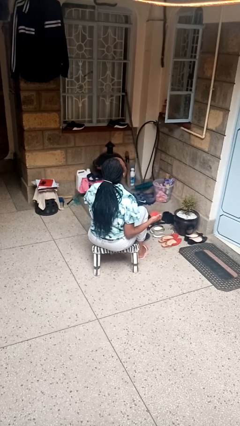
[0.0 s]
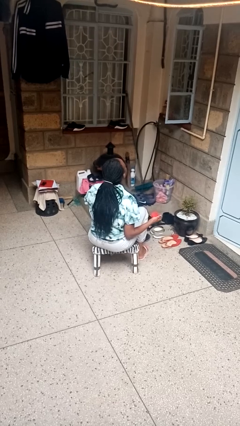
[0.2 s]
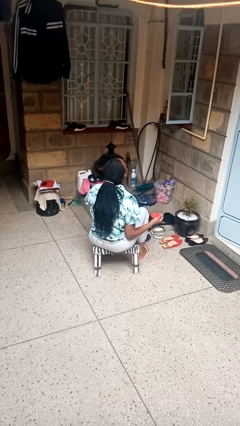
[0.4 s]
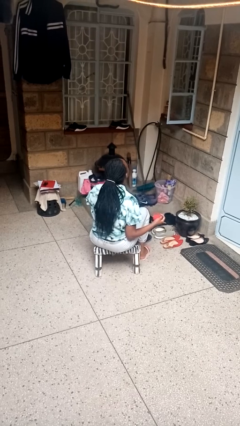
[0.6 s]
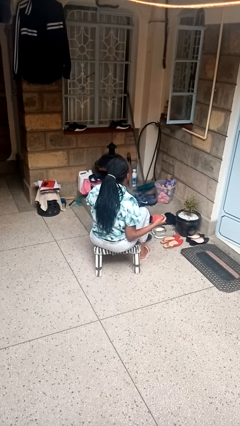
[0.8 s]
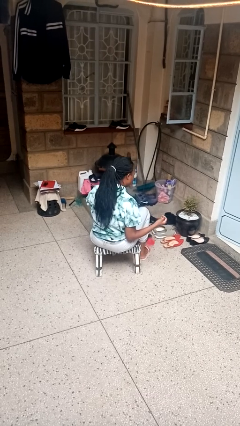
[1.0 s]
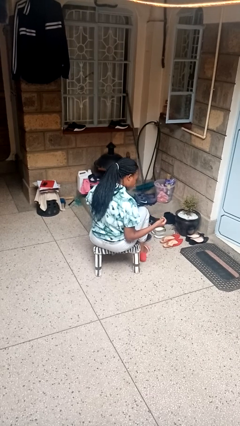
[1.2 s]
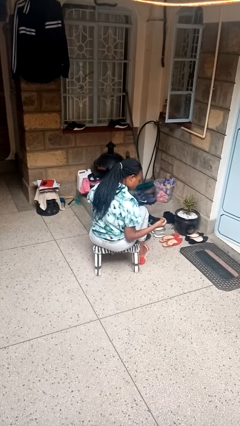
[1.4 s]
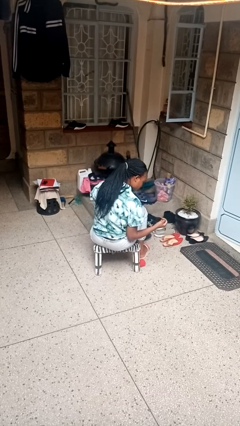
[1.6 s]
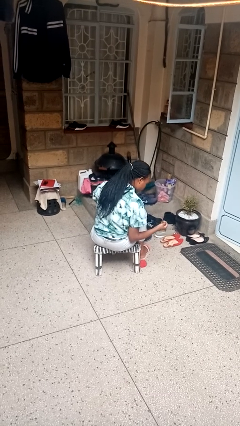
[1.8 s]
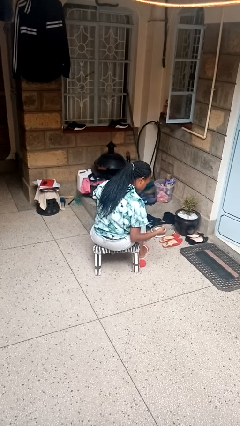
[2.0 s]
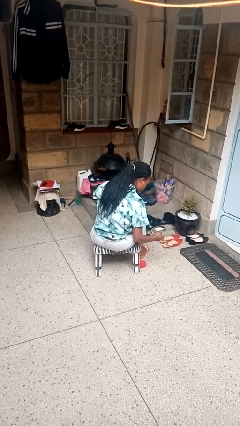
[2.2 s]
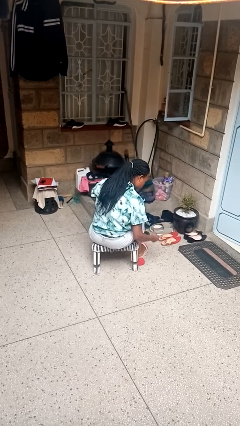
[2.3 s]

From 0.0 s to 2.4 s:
person drops object

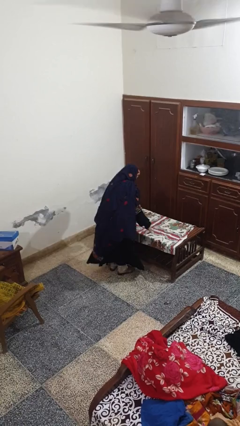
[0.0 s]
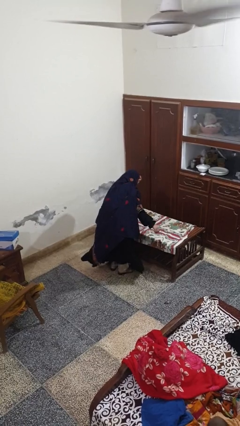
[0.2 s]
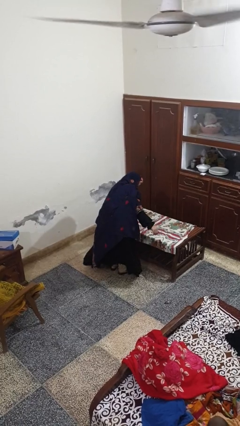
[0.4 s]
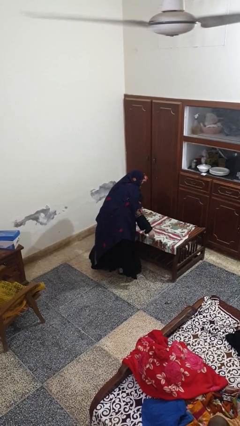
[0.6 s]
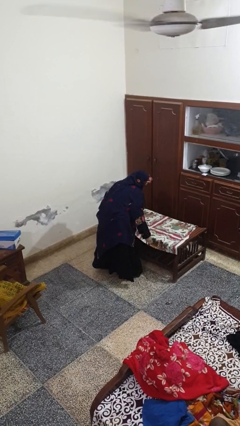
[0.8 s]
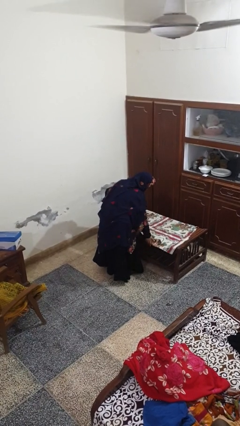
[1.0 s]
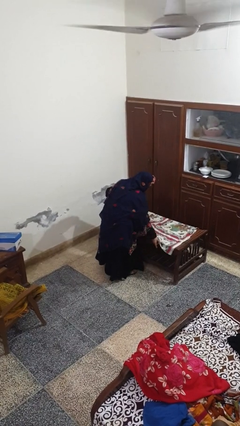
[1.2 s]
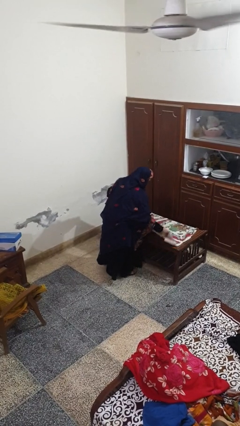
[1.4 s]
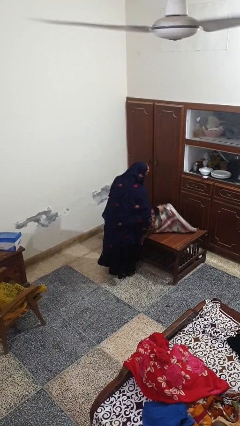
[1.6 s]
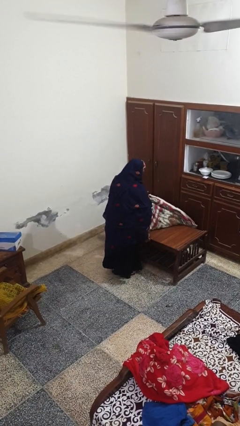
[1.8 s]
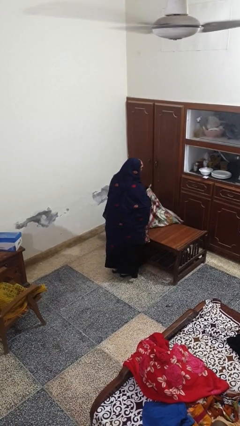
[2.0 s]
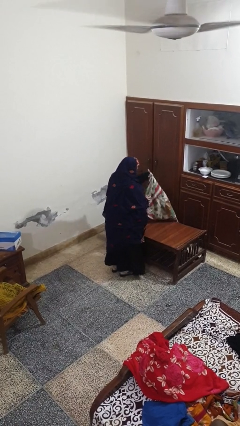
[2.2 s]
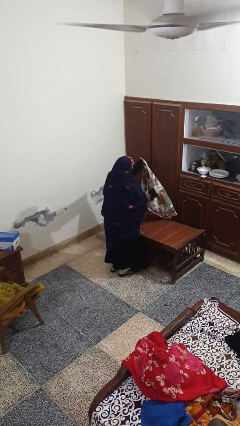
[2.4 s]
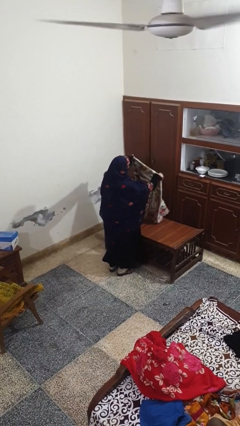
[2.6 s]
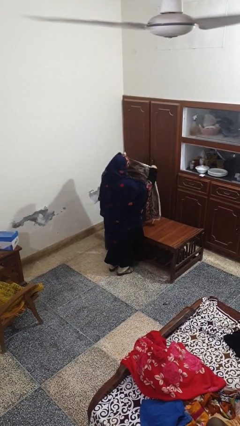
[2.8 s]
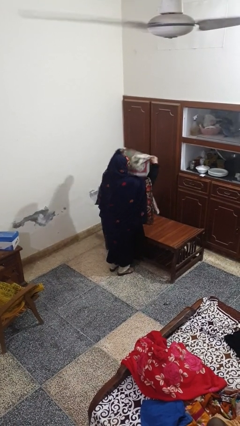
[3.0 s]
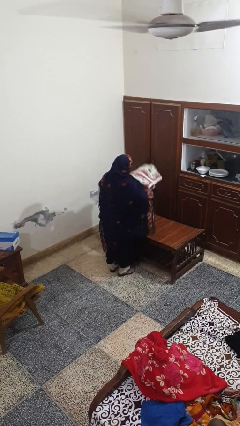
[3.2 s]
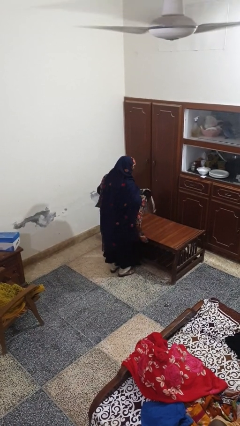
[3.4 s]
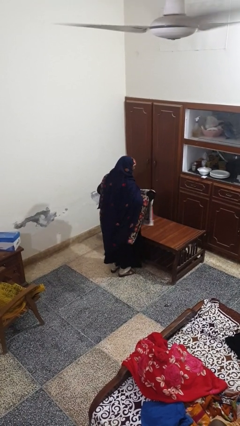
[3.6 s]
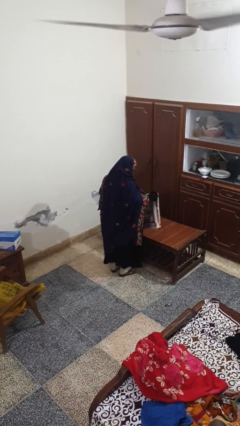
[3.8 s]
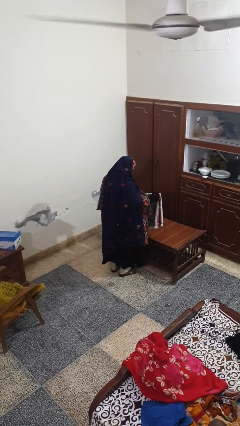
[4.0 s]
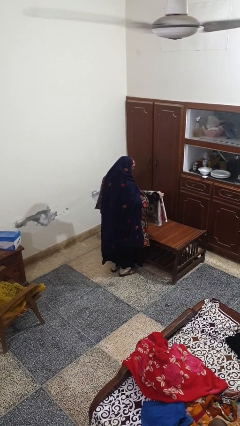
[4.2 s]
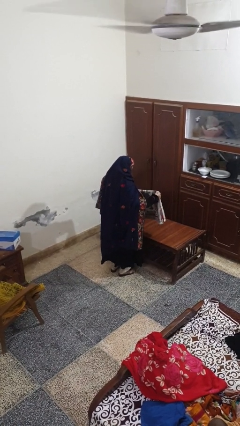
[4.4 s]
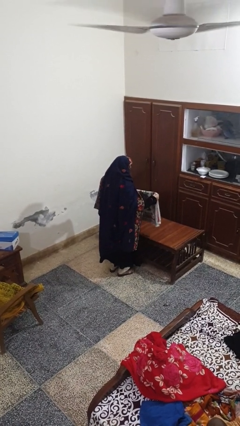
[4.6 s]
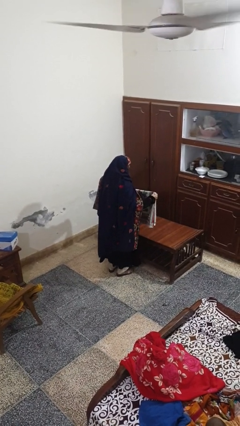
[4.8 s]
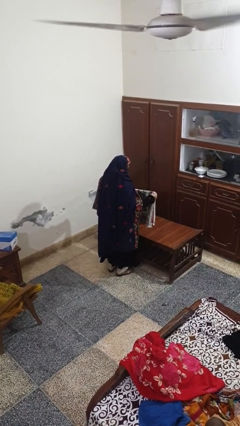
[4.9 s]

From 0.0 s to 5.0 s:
person folds tablecloth

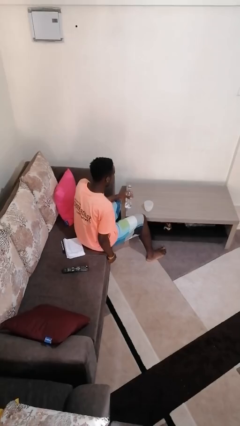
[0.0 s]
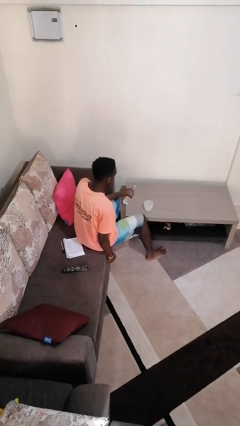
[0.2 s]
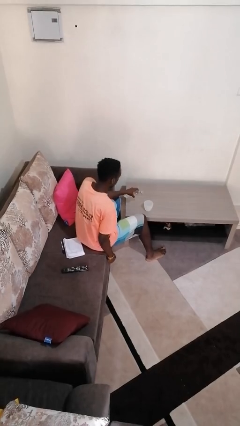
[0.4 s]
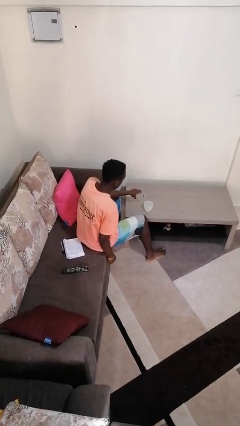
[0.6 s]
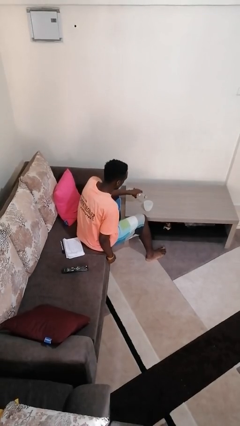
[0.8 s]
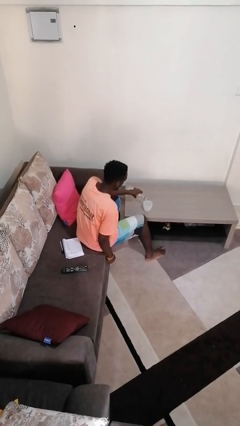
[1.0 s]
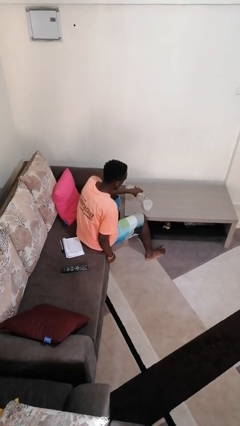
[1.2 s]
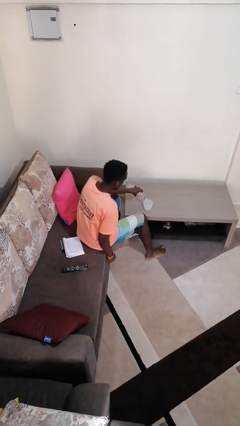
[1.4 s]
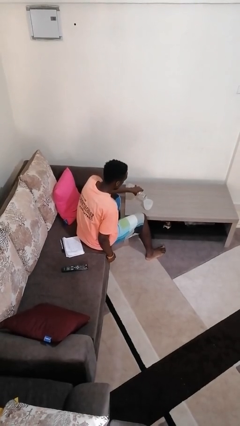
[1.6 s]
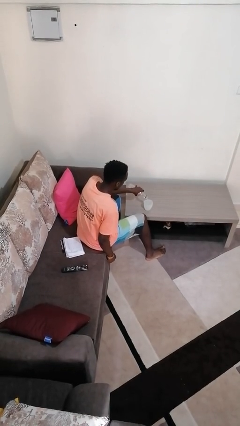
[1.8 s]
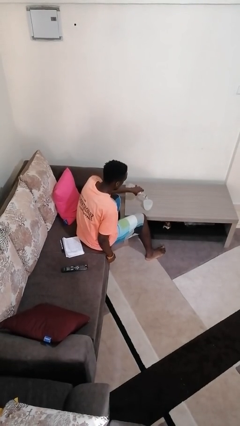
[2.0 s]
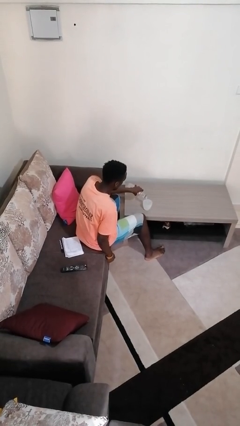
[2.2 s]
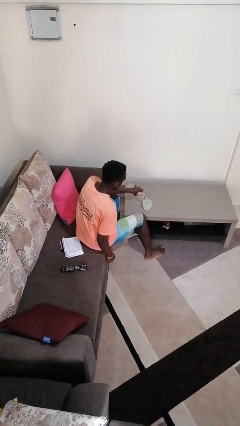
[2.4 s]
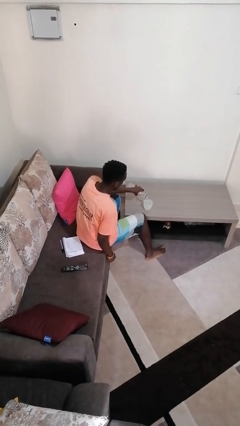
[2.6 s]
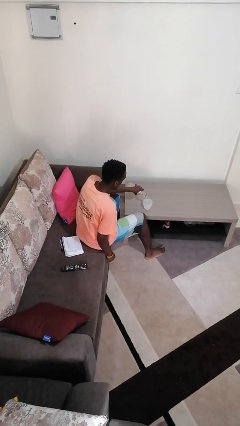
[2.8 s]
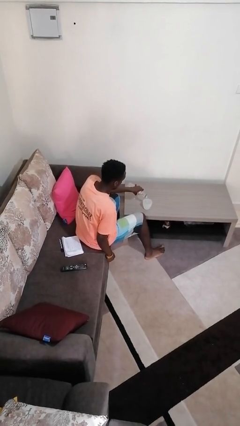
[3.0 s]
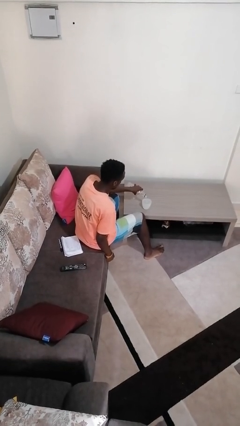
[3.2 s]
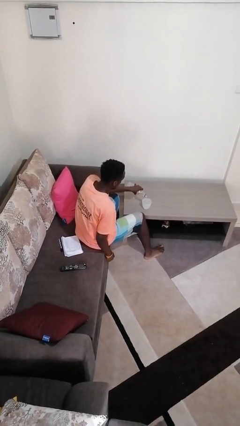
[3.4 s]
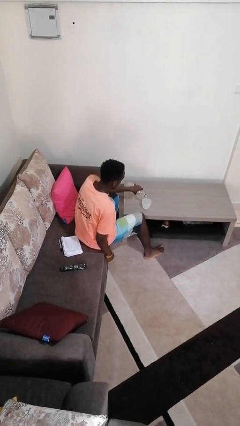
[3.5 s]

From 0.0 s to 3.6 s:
person pours liquid into cup

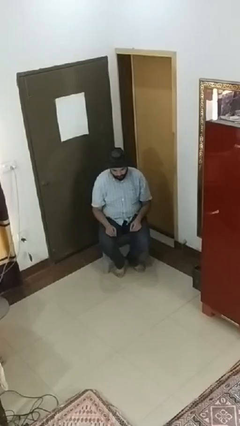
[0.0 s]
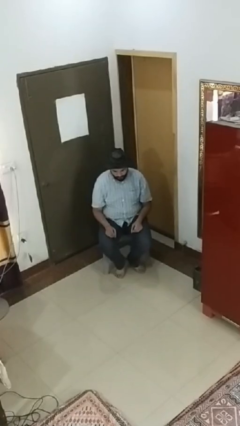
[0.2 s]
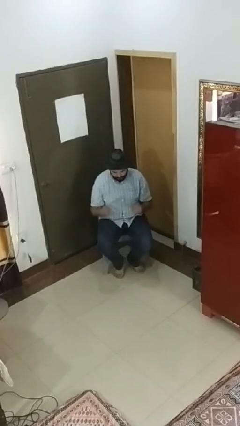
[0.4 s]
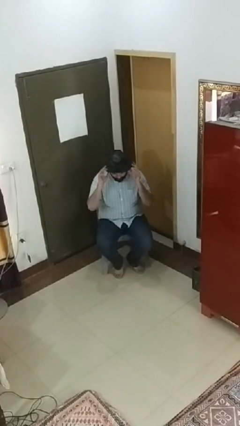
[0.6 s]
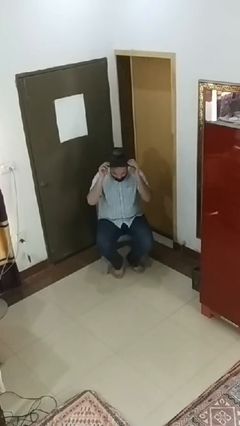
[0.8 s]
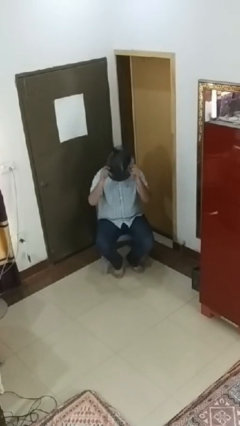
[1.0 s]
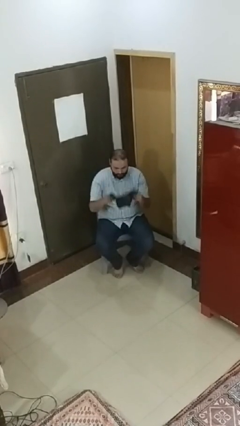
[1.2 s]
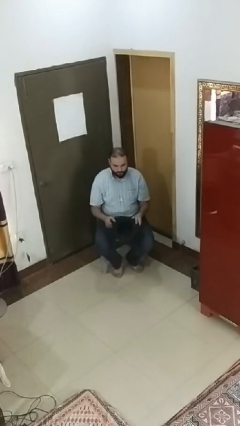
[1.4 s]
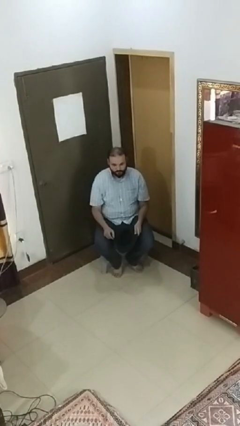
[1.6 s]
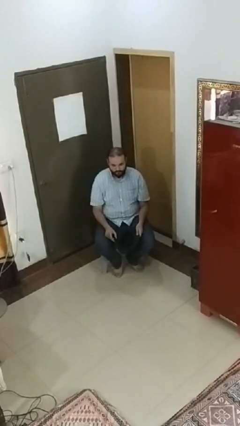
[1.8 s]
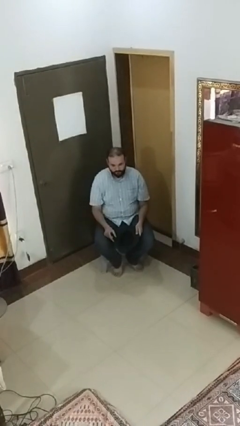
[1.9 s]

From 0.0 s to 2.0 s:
person takes off hat

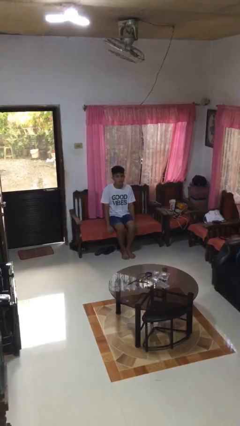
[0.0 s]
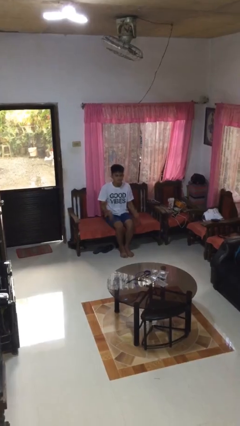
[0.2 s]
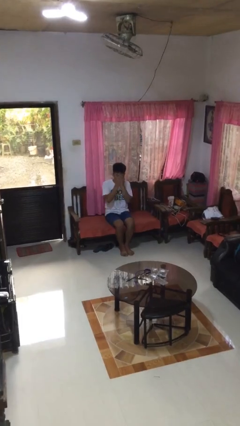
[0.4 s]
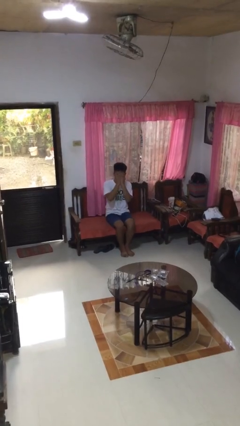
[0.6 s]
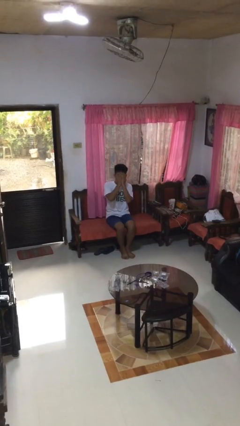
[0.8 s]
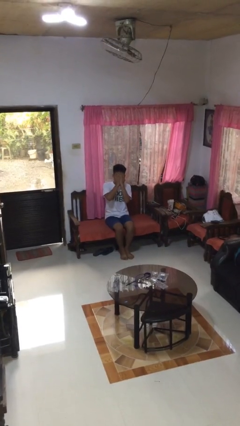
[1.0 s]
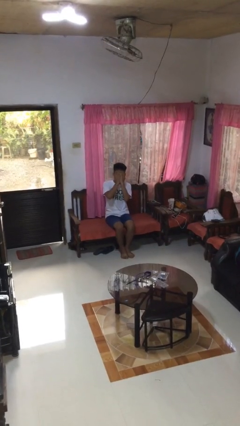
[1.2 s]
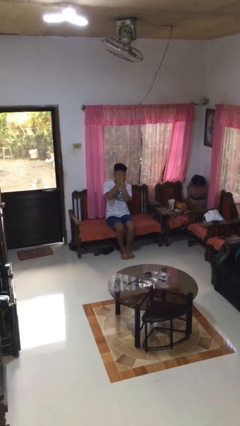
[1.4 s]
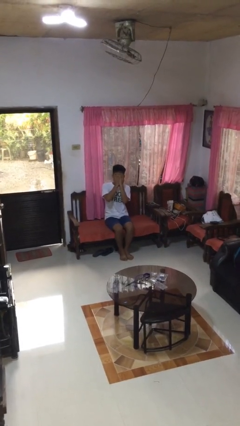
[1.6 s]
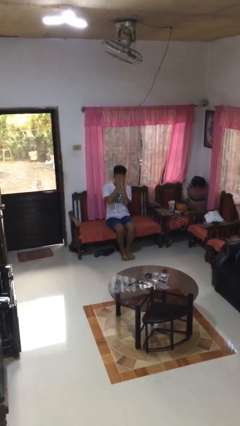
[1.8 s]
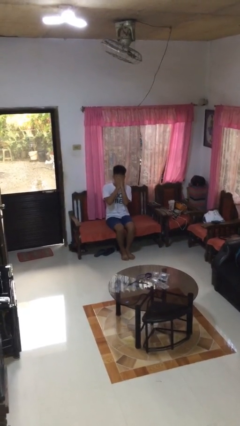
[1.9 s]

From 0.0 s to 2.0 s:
person covers face with hands

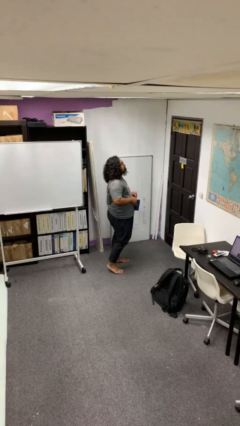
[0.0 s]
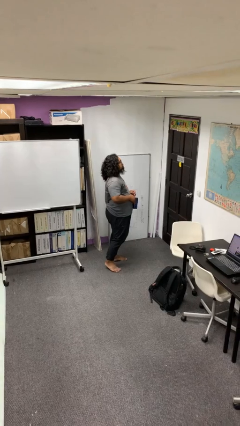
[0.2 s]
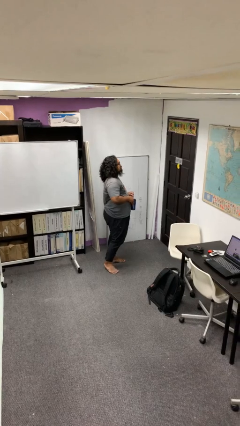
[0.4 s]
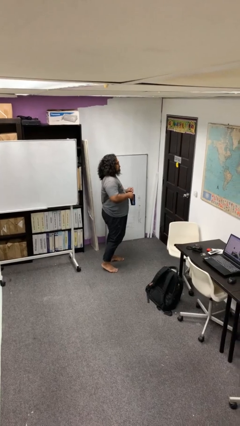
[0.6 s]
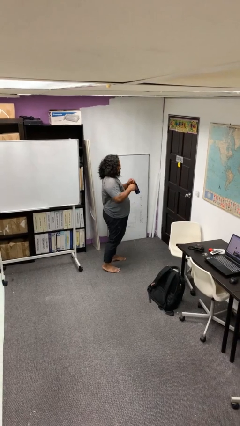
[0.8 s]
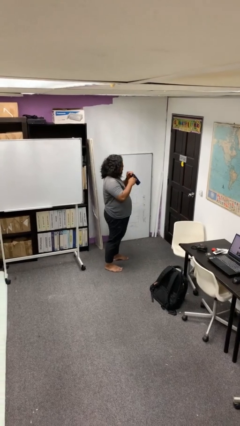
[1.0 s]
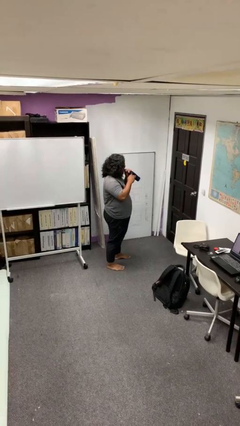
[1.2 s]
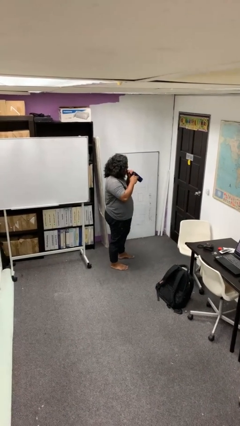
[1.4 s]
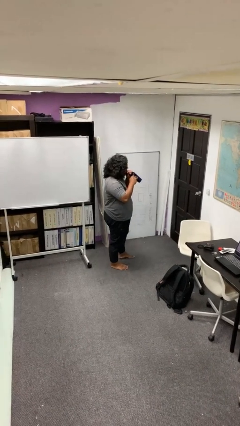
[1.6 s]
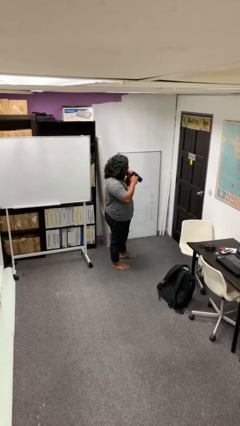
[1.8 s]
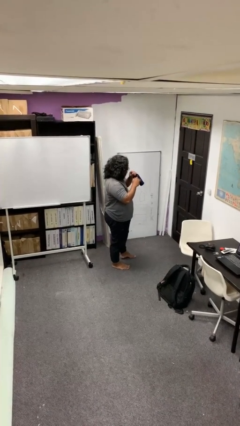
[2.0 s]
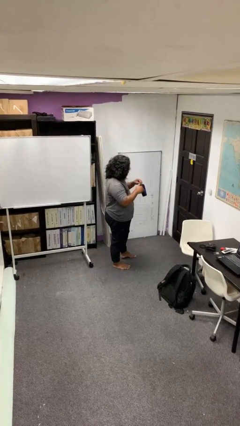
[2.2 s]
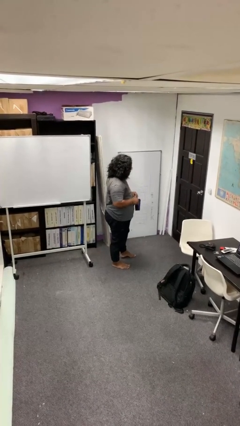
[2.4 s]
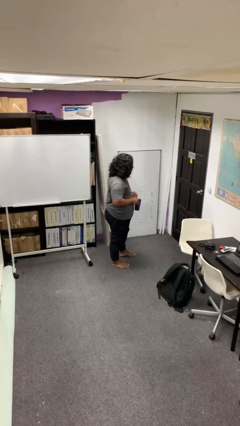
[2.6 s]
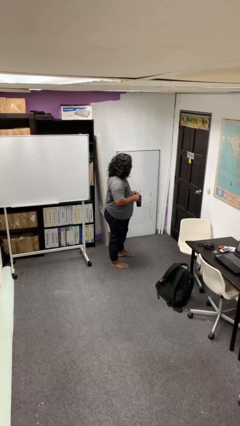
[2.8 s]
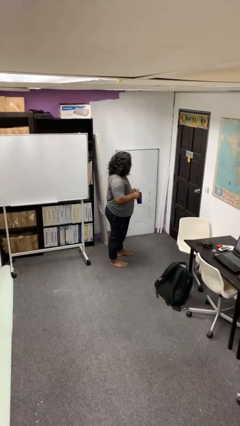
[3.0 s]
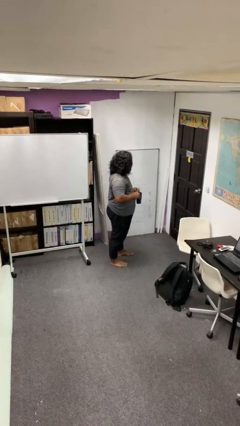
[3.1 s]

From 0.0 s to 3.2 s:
person drinks from straw
